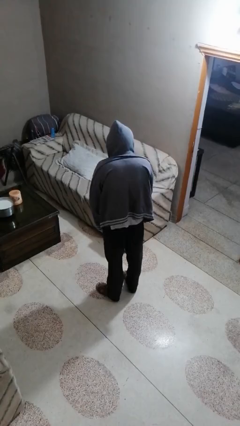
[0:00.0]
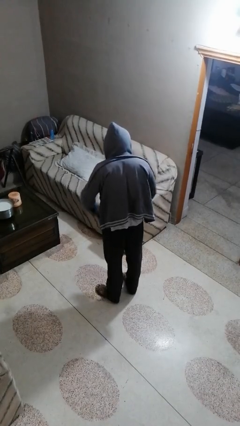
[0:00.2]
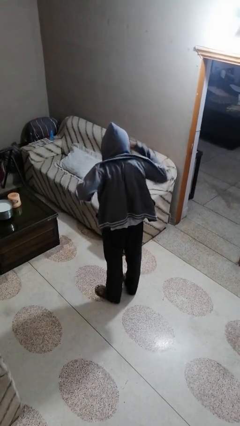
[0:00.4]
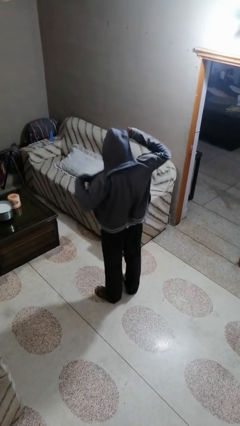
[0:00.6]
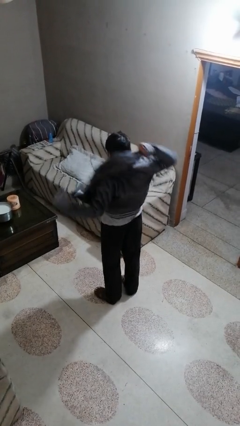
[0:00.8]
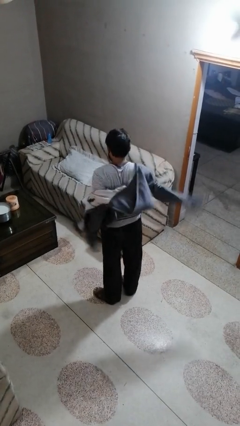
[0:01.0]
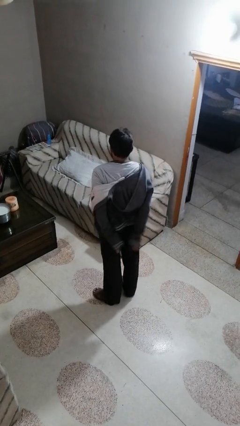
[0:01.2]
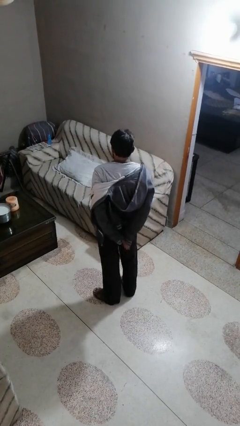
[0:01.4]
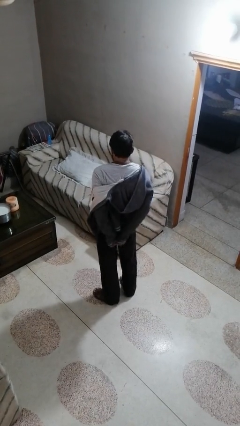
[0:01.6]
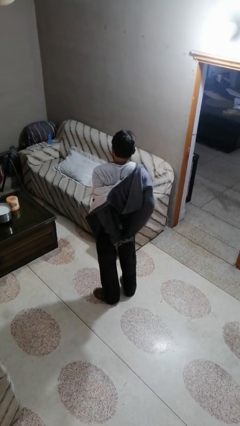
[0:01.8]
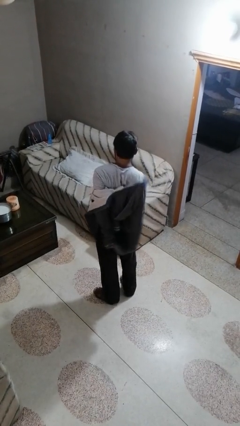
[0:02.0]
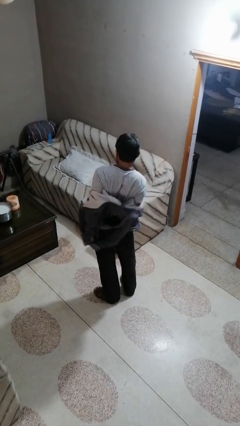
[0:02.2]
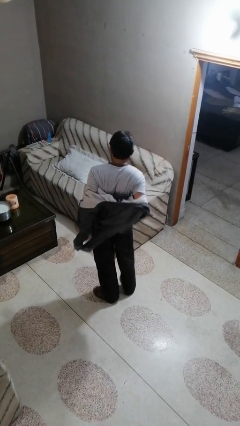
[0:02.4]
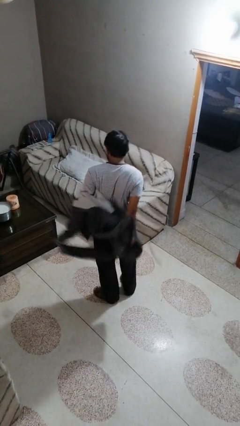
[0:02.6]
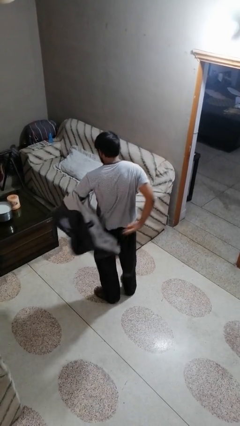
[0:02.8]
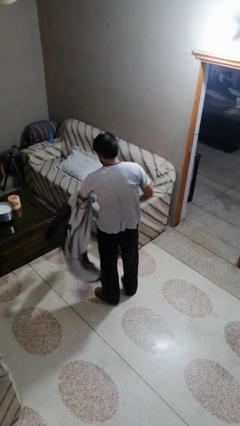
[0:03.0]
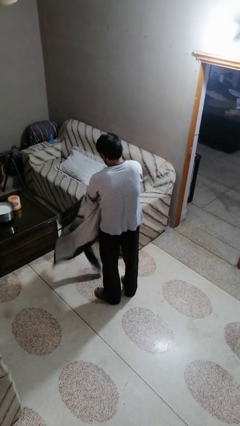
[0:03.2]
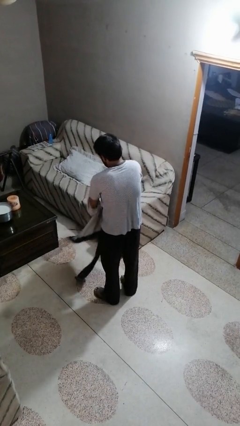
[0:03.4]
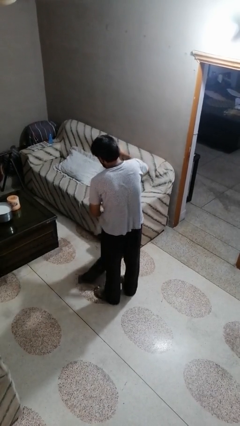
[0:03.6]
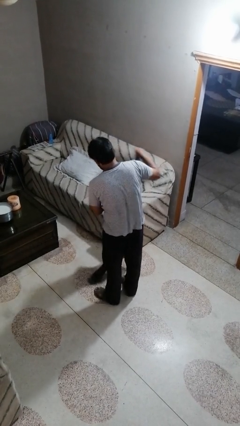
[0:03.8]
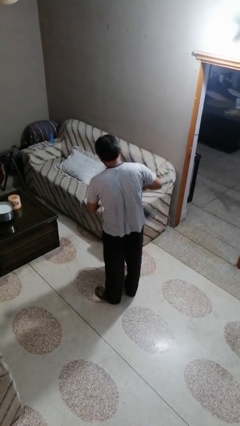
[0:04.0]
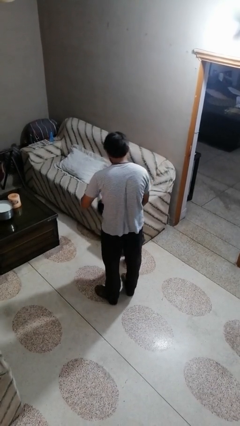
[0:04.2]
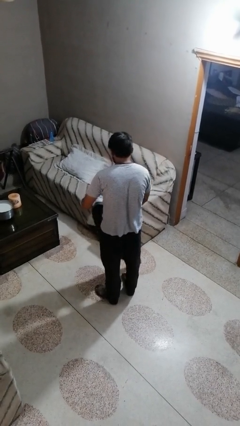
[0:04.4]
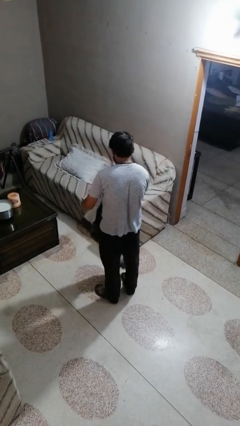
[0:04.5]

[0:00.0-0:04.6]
person takes off hoodie

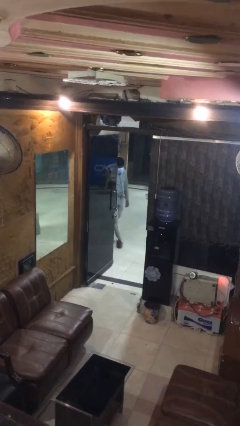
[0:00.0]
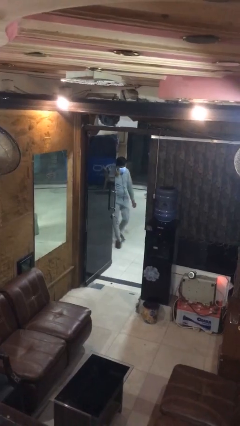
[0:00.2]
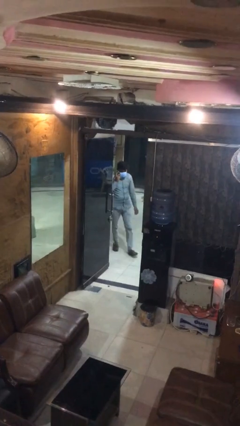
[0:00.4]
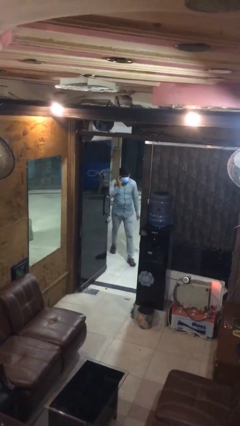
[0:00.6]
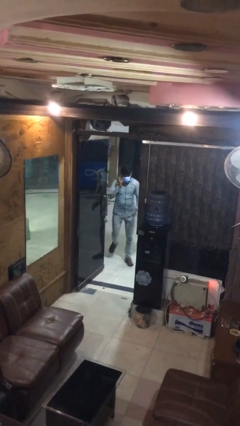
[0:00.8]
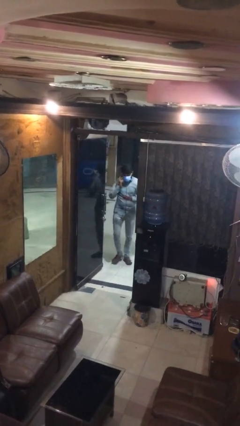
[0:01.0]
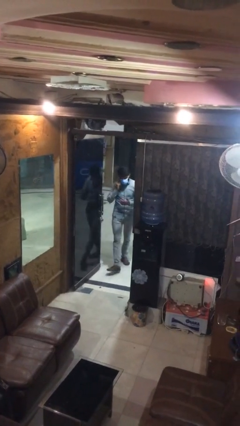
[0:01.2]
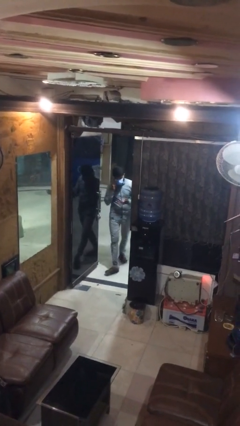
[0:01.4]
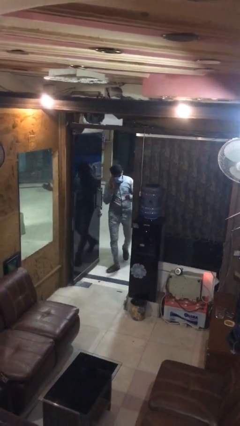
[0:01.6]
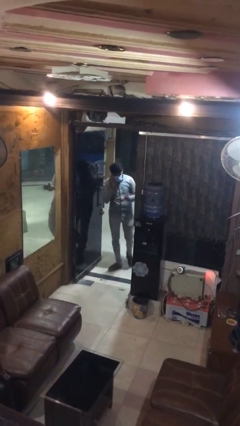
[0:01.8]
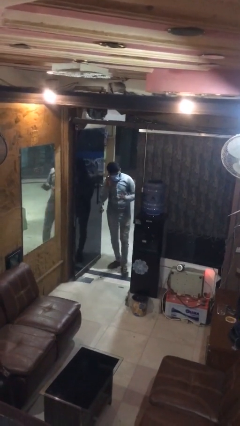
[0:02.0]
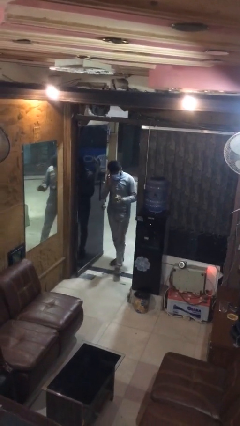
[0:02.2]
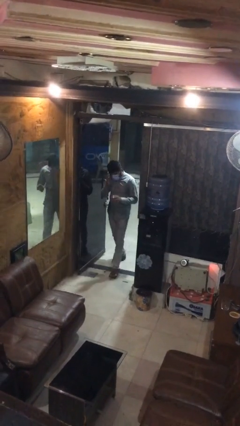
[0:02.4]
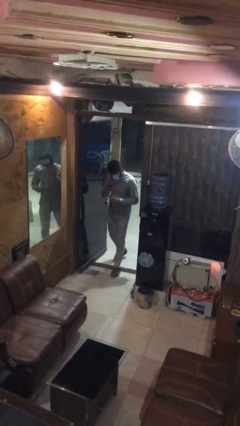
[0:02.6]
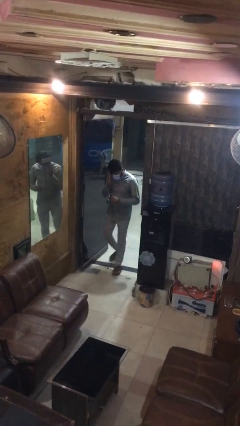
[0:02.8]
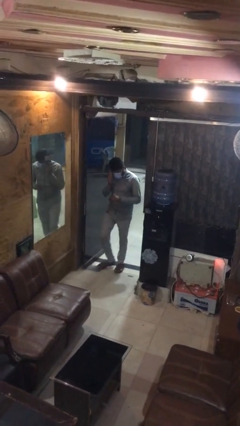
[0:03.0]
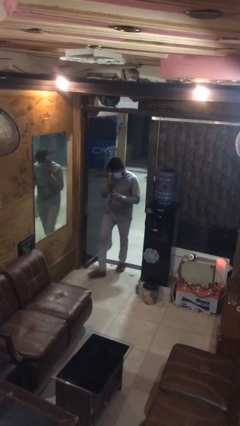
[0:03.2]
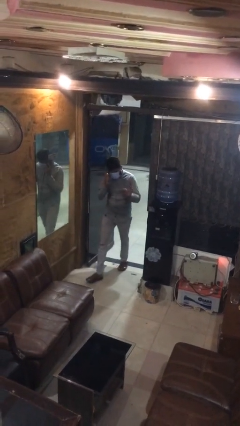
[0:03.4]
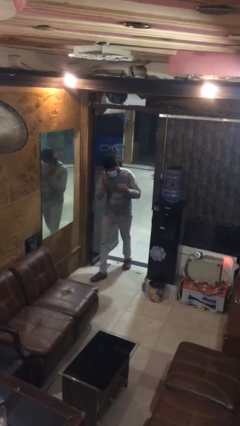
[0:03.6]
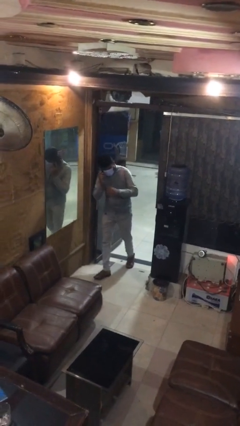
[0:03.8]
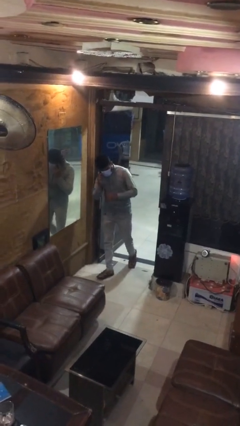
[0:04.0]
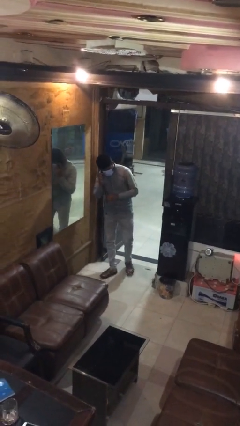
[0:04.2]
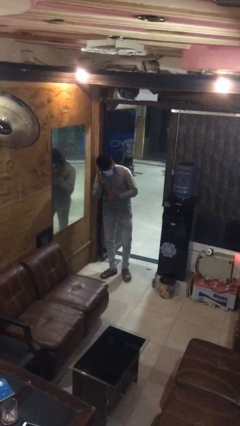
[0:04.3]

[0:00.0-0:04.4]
person enters scene through structure

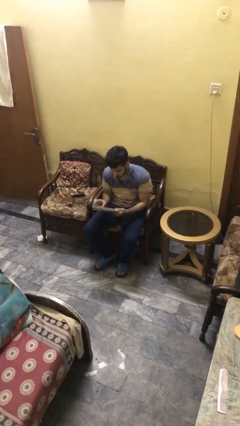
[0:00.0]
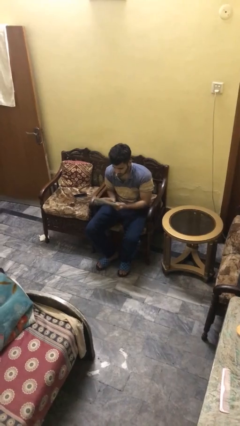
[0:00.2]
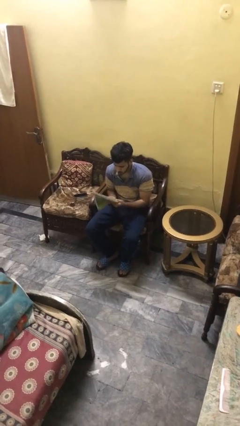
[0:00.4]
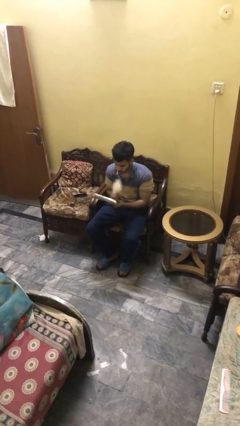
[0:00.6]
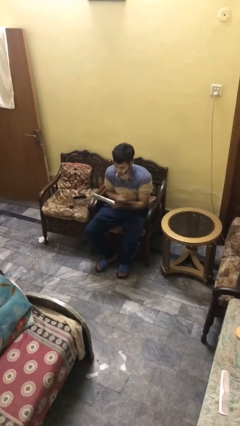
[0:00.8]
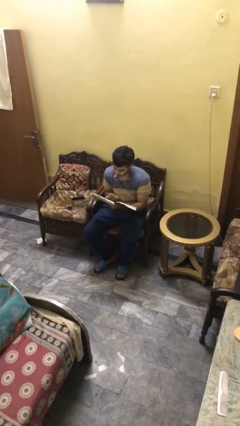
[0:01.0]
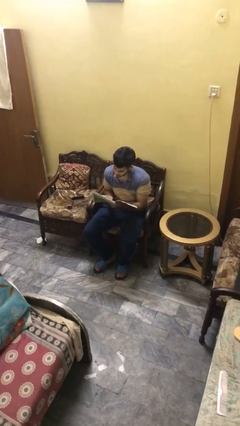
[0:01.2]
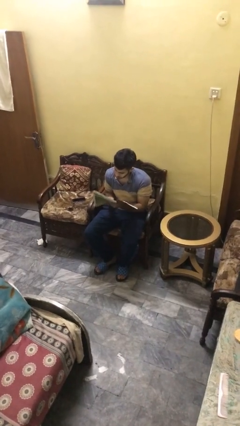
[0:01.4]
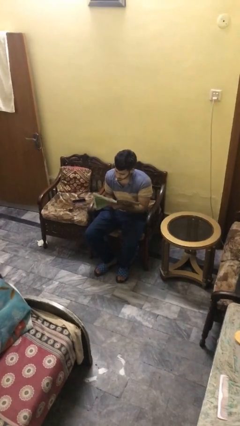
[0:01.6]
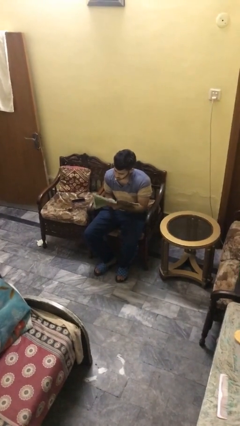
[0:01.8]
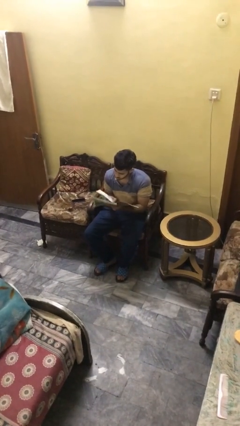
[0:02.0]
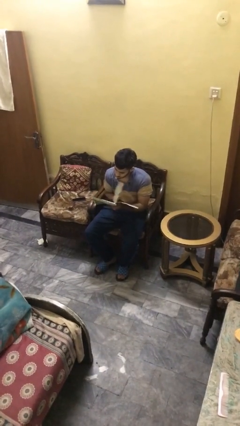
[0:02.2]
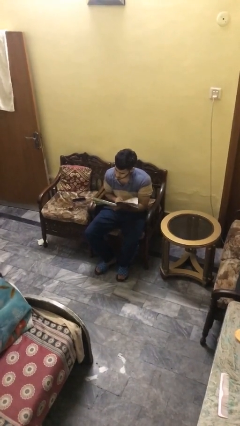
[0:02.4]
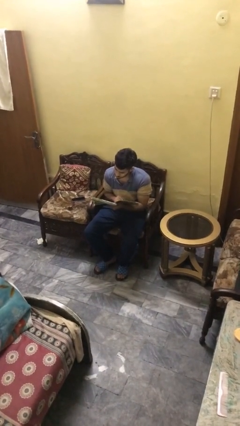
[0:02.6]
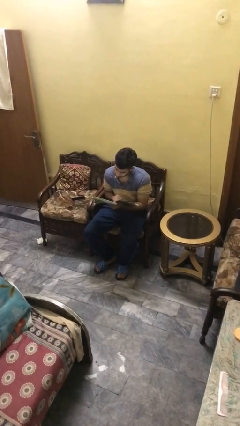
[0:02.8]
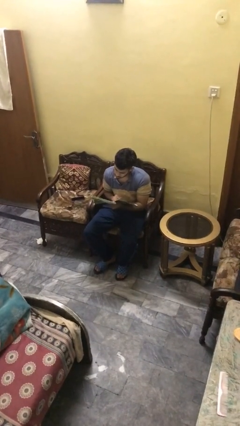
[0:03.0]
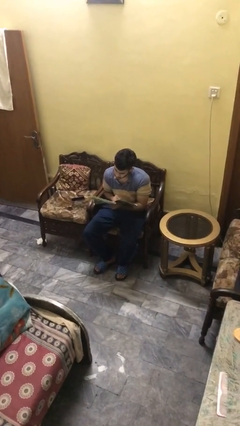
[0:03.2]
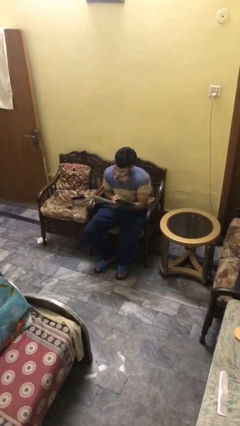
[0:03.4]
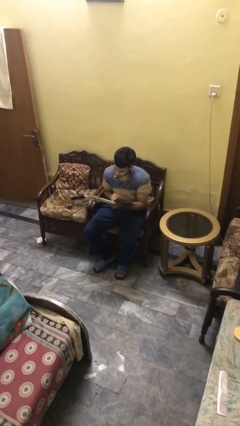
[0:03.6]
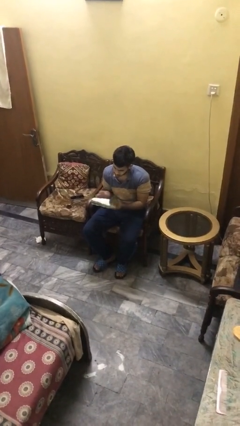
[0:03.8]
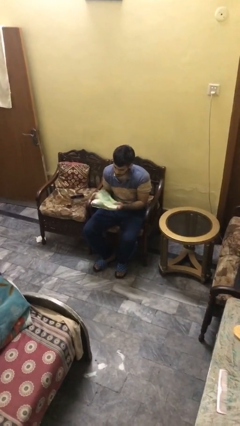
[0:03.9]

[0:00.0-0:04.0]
person reads document

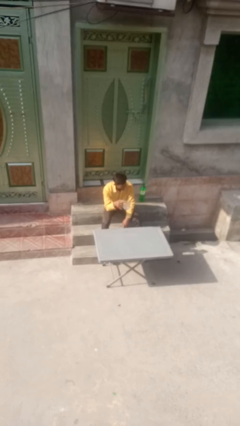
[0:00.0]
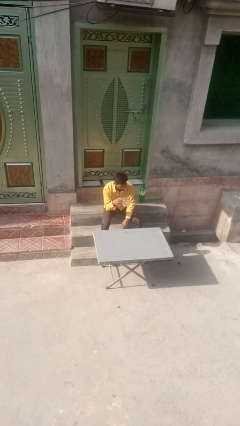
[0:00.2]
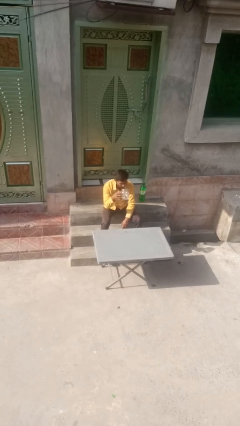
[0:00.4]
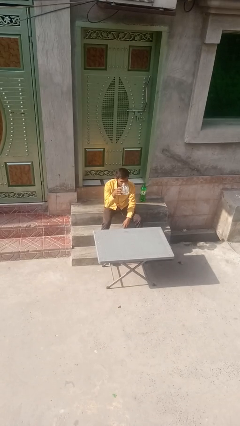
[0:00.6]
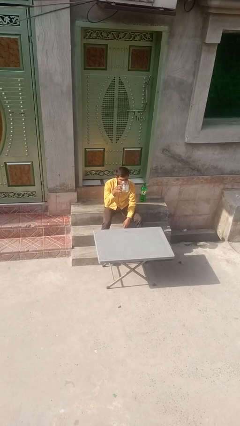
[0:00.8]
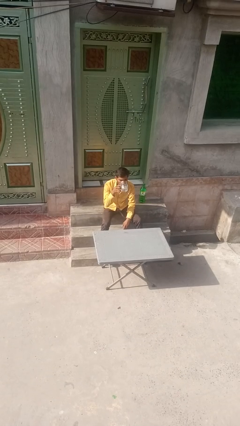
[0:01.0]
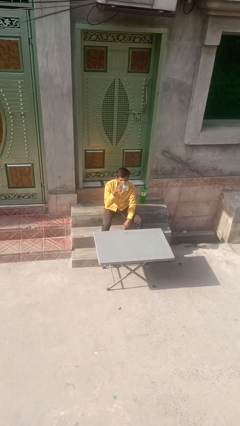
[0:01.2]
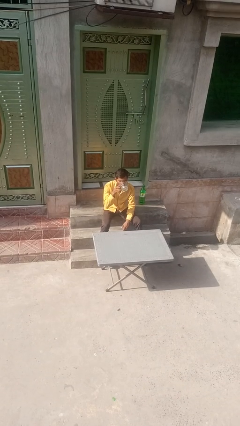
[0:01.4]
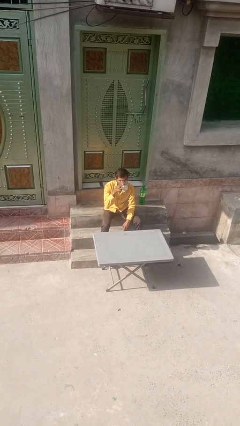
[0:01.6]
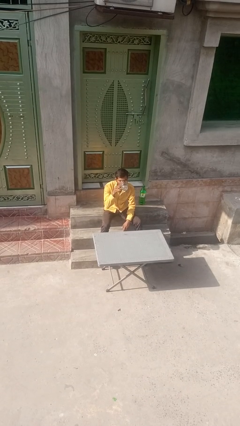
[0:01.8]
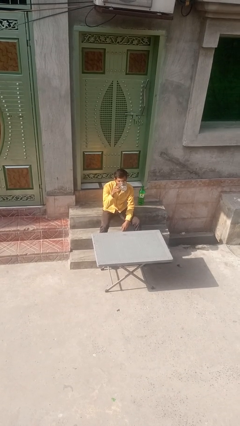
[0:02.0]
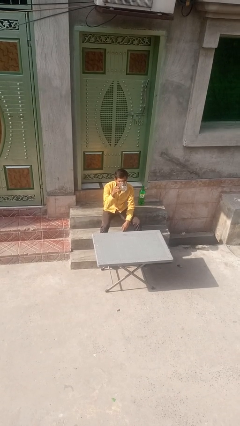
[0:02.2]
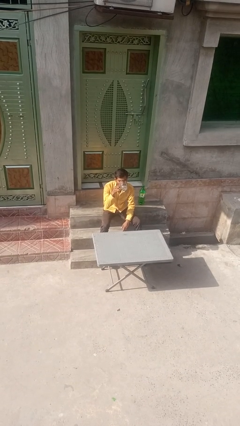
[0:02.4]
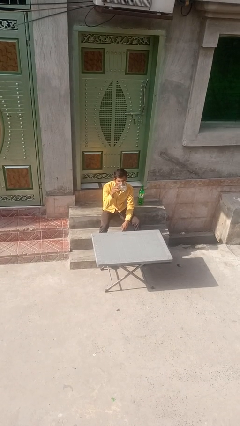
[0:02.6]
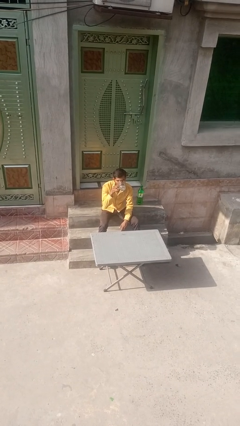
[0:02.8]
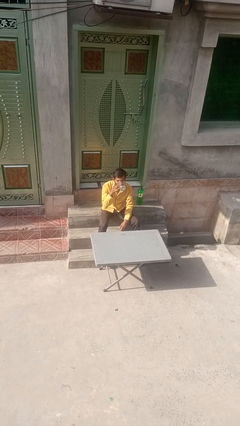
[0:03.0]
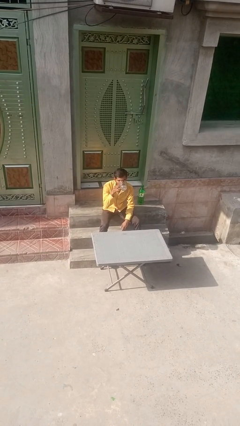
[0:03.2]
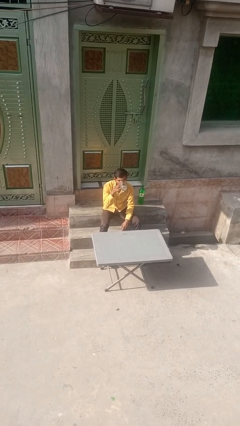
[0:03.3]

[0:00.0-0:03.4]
person drinks from mug

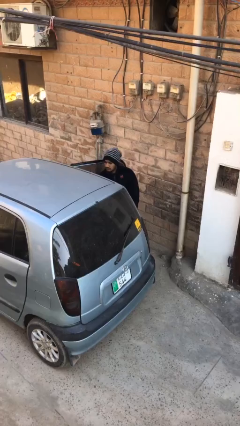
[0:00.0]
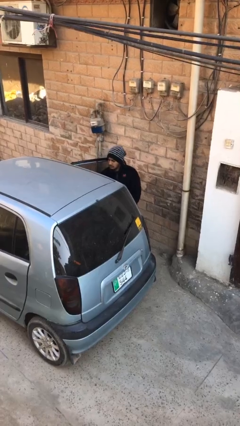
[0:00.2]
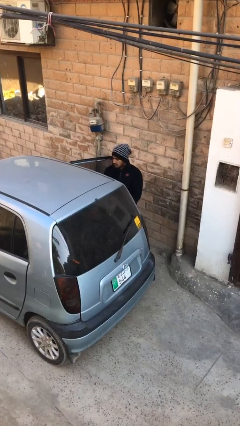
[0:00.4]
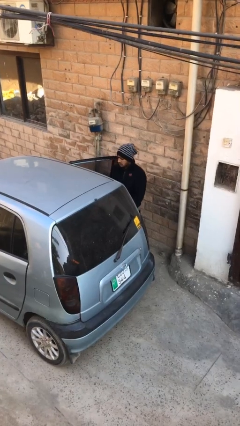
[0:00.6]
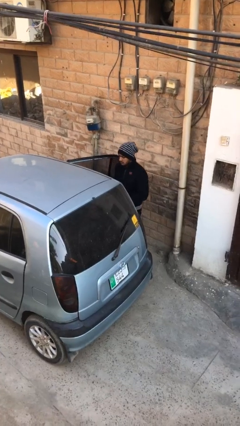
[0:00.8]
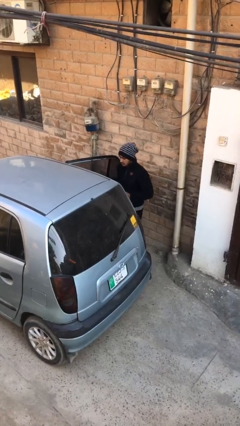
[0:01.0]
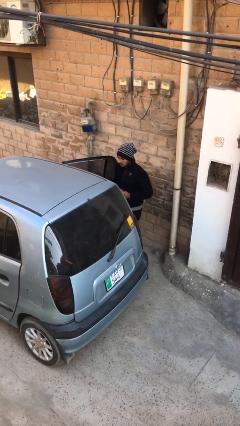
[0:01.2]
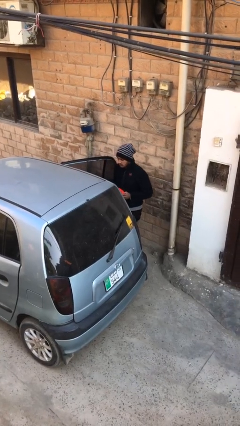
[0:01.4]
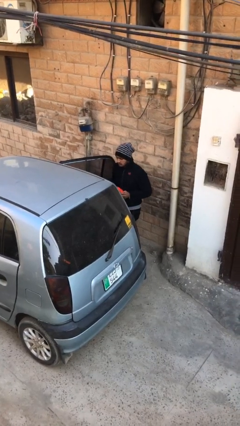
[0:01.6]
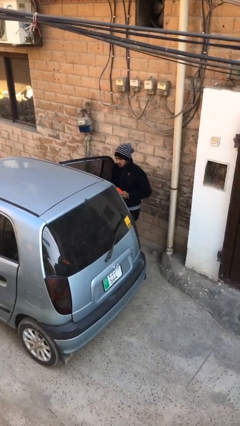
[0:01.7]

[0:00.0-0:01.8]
person unloads car
